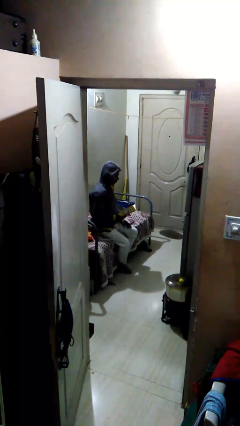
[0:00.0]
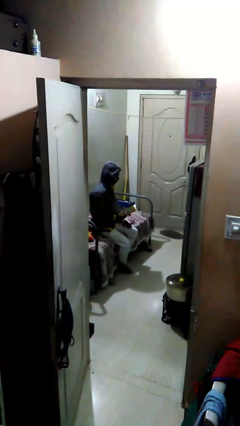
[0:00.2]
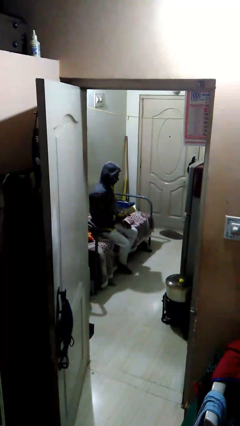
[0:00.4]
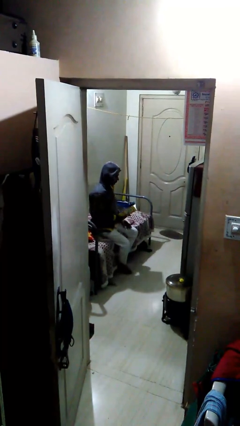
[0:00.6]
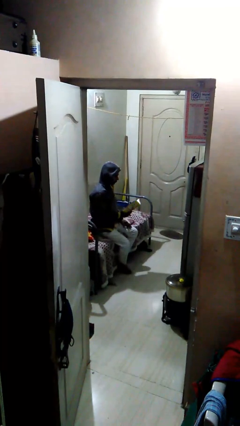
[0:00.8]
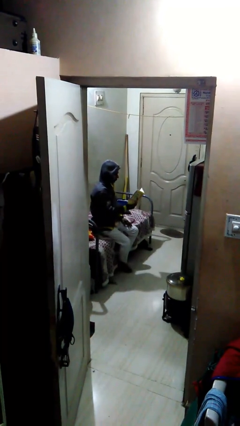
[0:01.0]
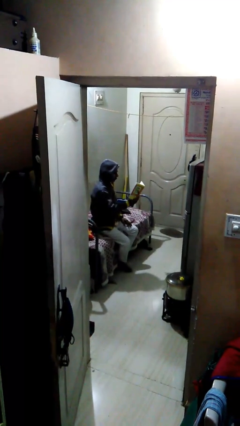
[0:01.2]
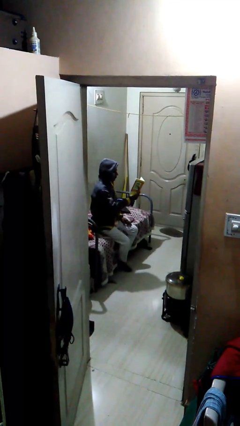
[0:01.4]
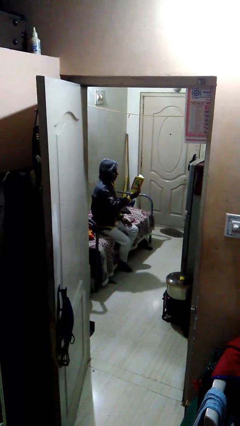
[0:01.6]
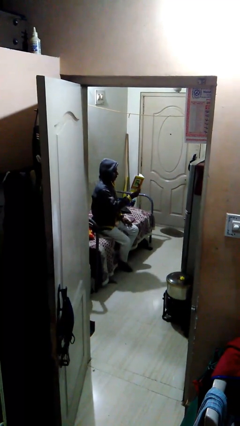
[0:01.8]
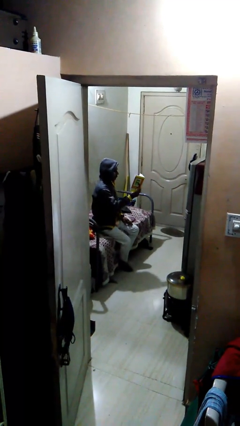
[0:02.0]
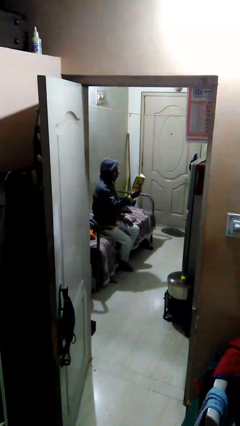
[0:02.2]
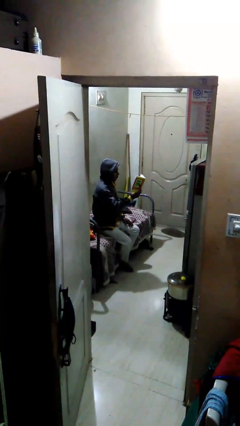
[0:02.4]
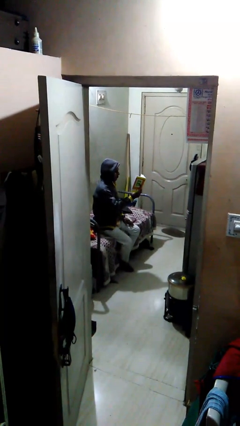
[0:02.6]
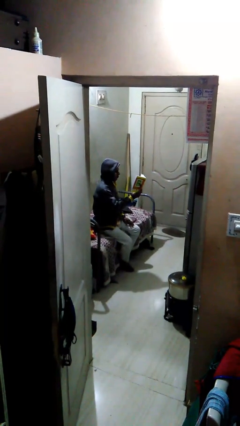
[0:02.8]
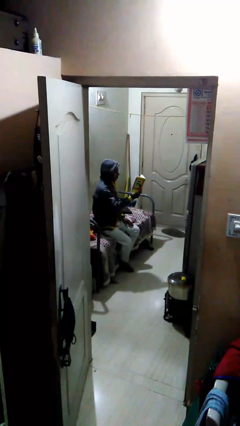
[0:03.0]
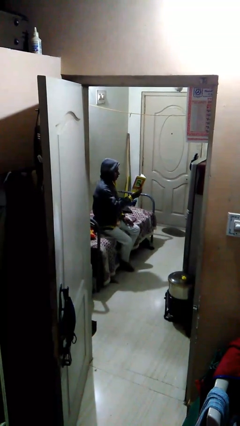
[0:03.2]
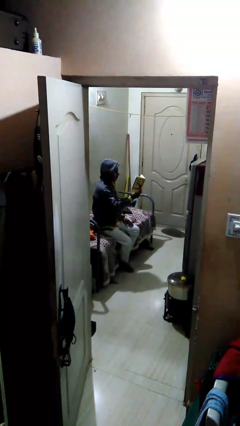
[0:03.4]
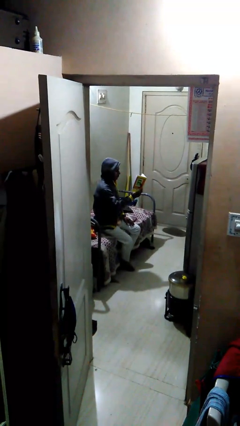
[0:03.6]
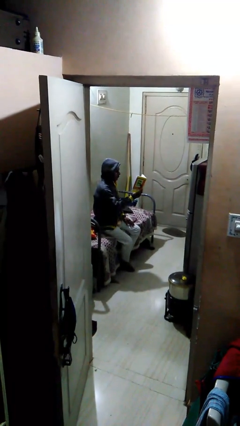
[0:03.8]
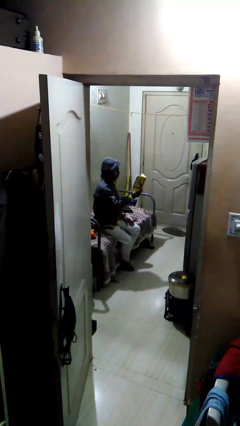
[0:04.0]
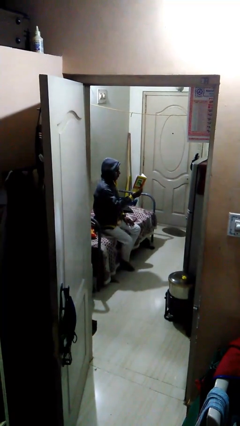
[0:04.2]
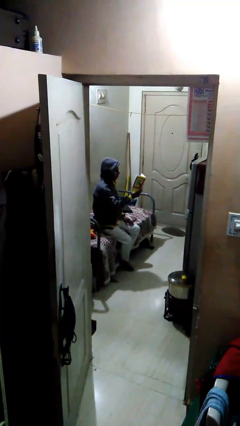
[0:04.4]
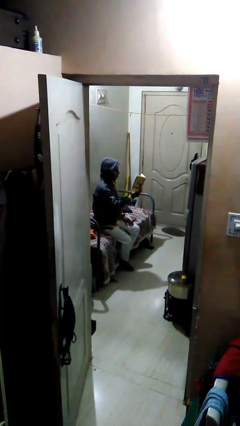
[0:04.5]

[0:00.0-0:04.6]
person reads document

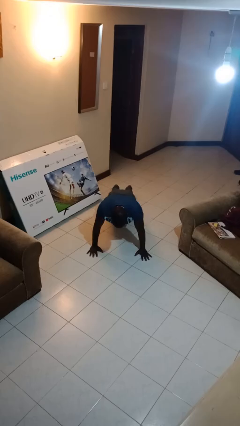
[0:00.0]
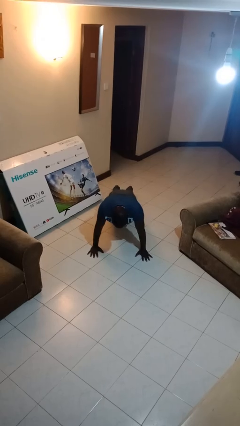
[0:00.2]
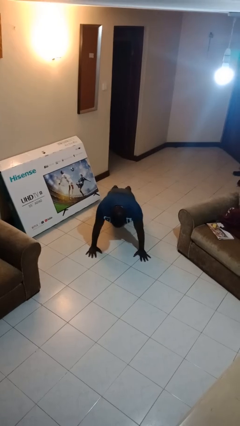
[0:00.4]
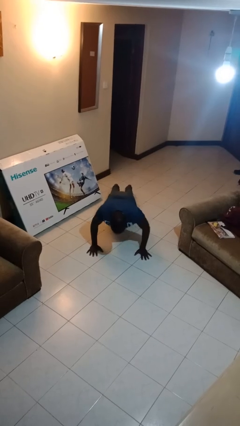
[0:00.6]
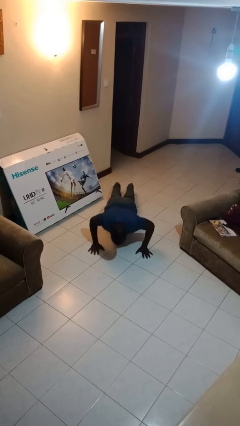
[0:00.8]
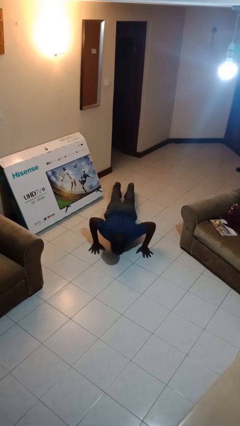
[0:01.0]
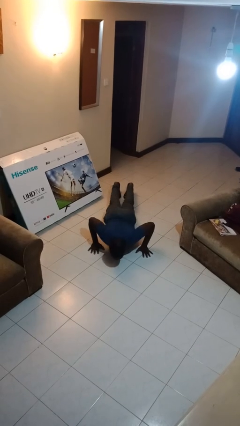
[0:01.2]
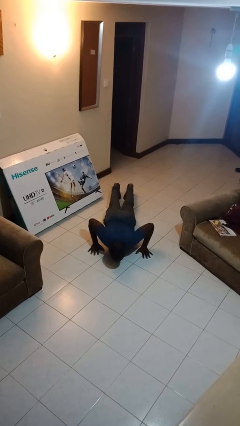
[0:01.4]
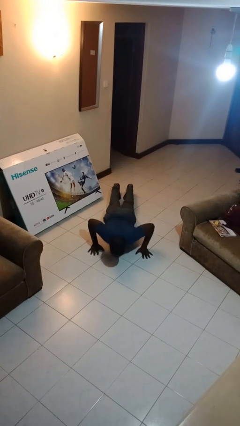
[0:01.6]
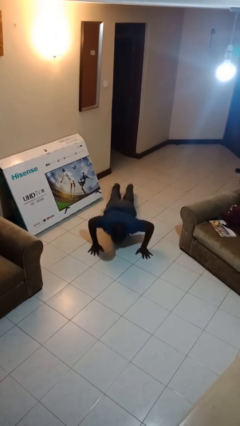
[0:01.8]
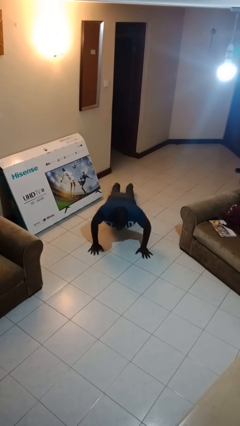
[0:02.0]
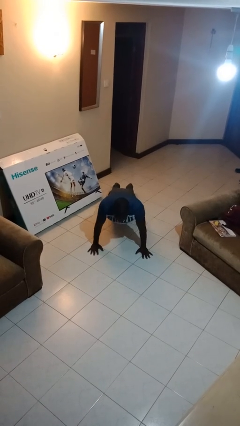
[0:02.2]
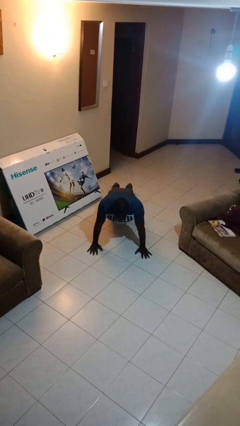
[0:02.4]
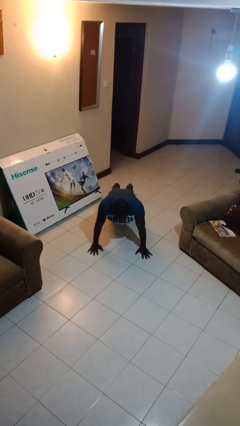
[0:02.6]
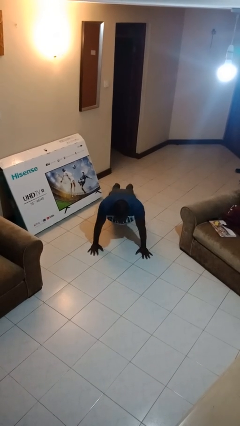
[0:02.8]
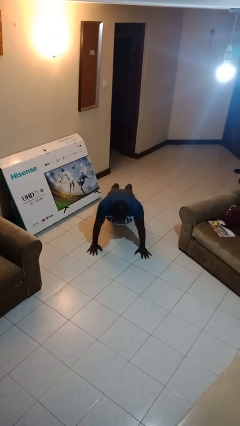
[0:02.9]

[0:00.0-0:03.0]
person exercises with pushup

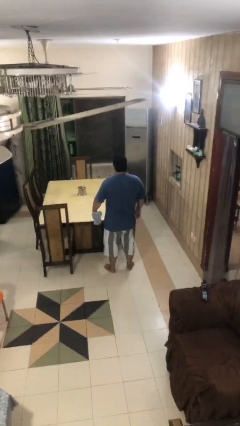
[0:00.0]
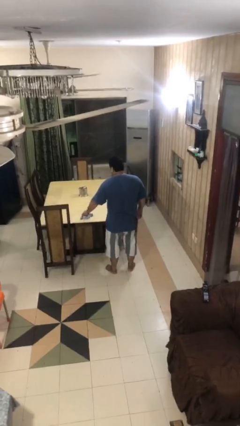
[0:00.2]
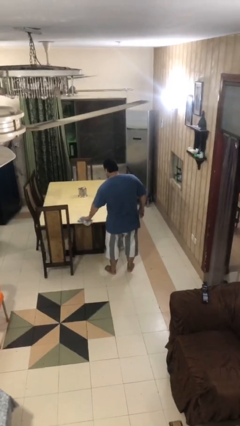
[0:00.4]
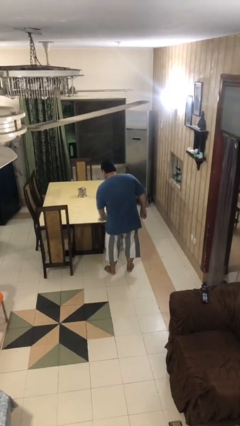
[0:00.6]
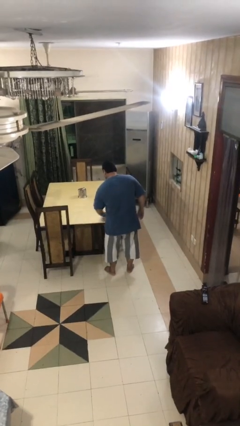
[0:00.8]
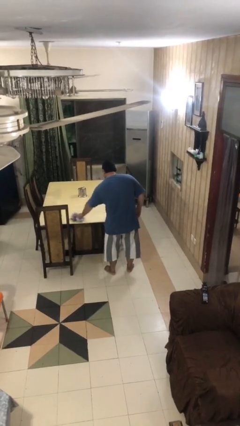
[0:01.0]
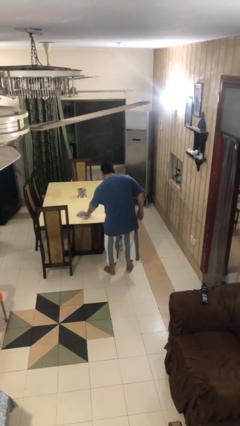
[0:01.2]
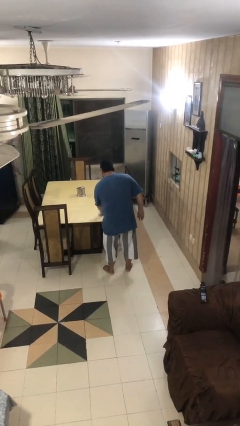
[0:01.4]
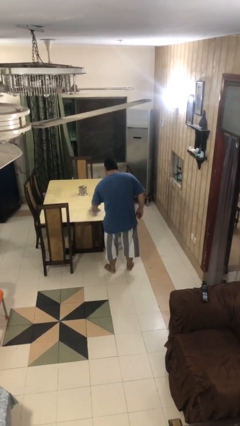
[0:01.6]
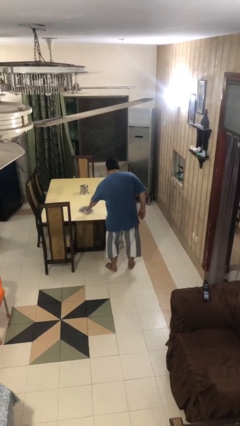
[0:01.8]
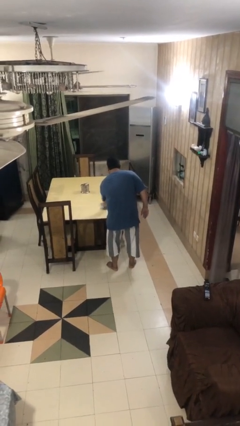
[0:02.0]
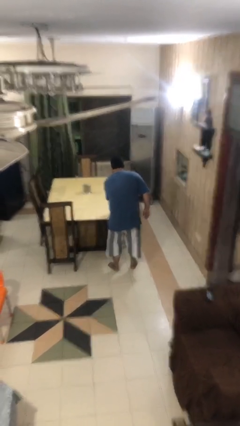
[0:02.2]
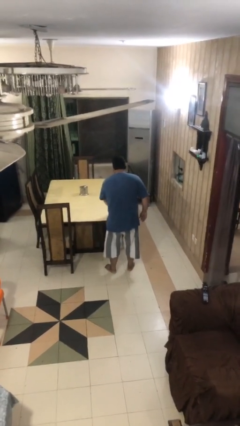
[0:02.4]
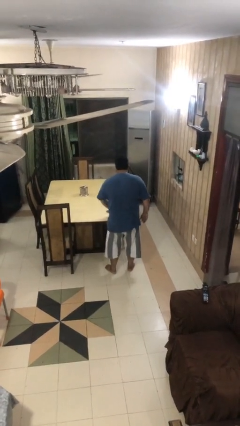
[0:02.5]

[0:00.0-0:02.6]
person cleans table with rag

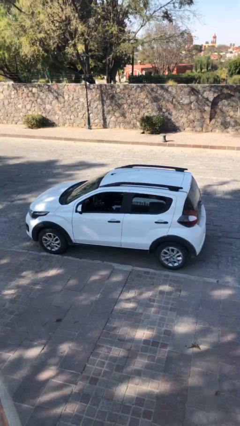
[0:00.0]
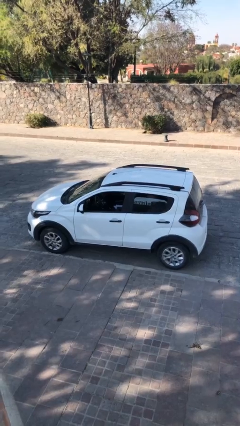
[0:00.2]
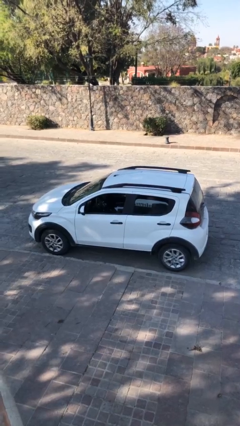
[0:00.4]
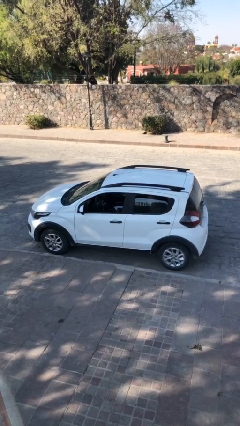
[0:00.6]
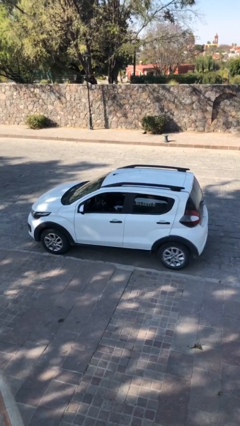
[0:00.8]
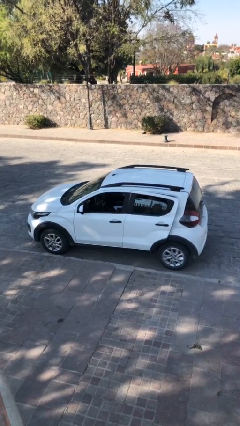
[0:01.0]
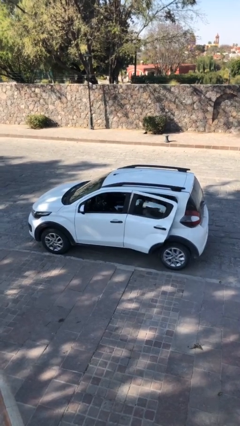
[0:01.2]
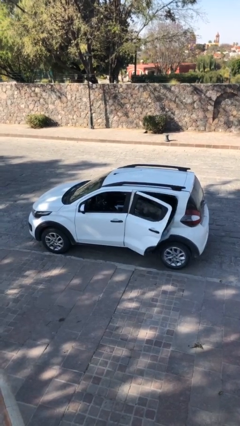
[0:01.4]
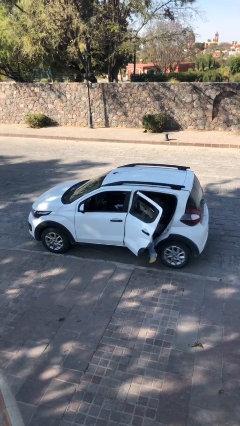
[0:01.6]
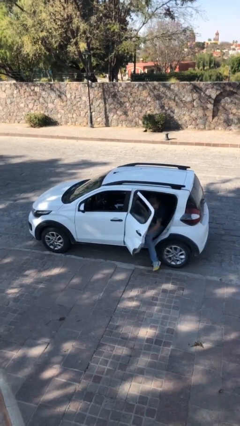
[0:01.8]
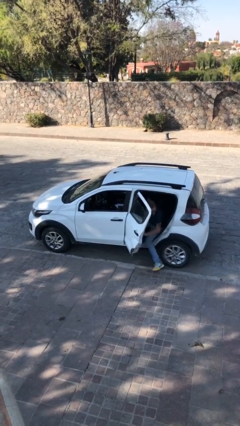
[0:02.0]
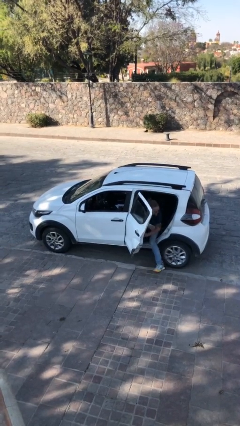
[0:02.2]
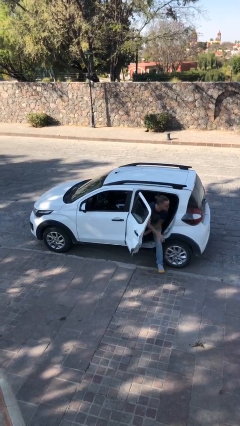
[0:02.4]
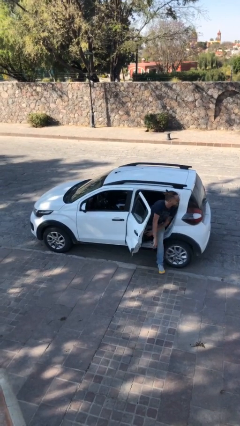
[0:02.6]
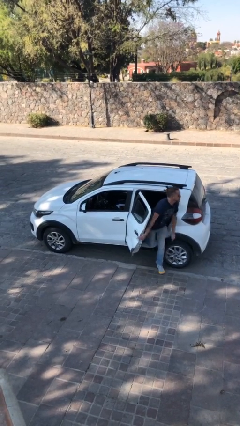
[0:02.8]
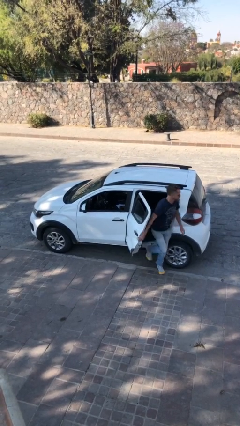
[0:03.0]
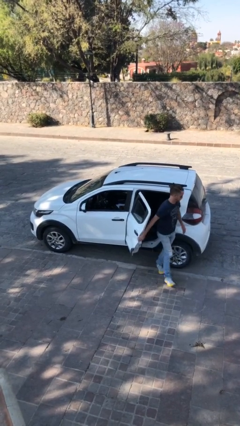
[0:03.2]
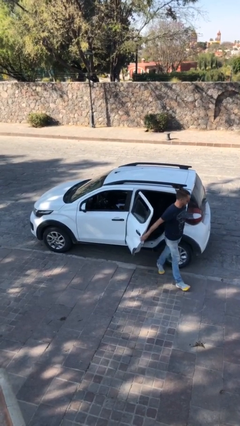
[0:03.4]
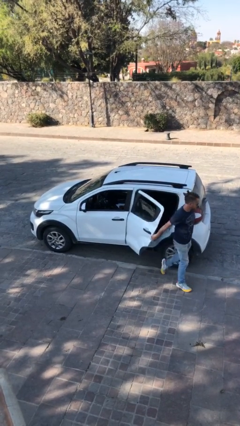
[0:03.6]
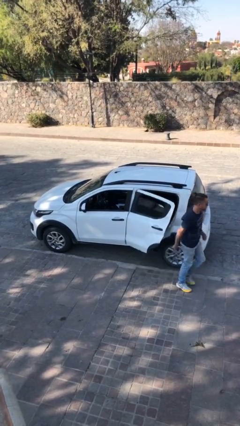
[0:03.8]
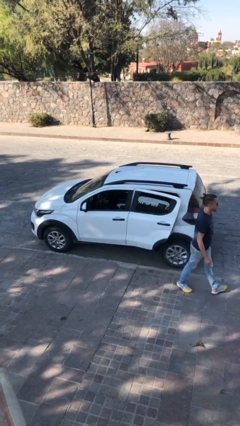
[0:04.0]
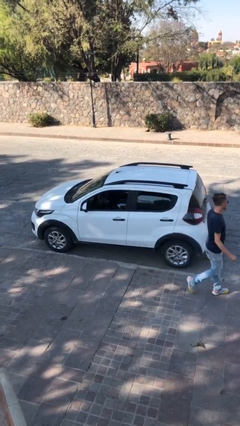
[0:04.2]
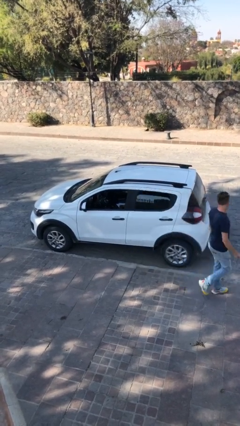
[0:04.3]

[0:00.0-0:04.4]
car drops off person

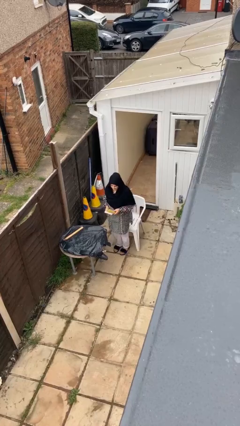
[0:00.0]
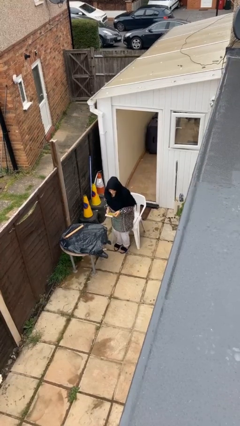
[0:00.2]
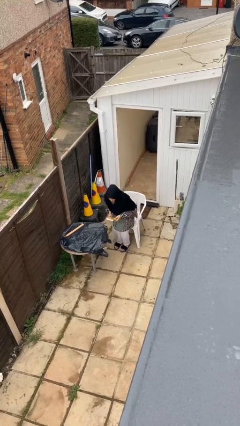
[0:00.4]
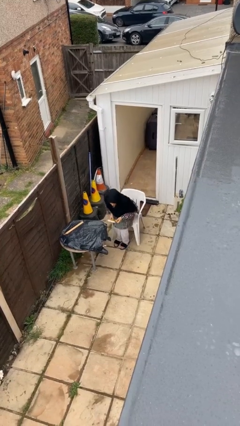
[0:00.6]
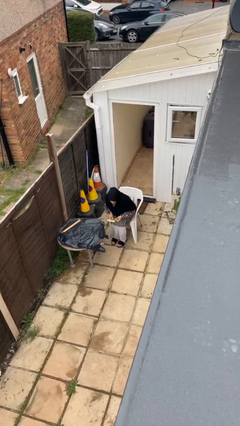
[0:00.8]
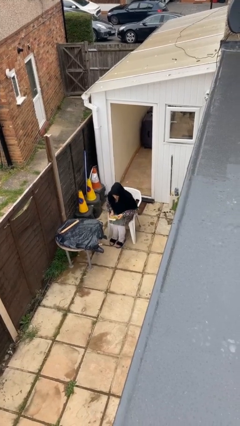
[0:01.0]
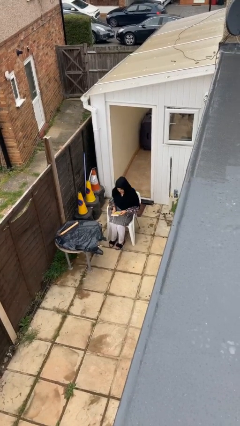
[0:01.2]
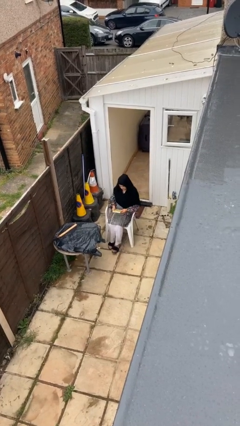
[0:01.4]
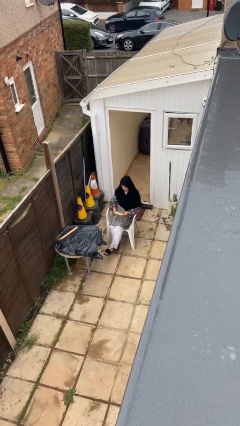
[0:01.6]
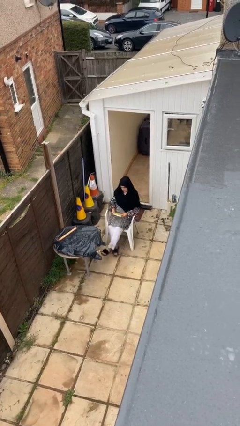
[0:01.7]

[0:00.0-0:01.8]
person sits down

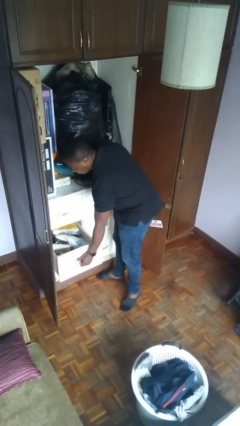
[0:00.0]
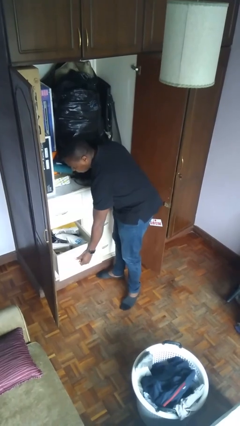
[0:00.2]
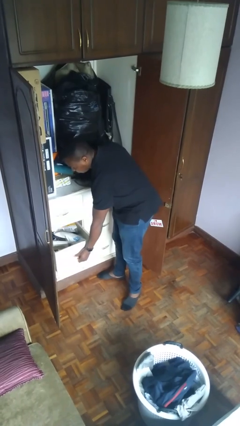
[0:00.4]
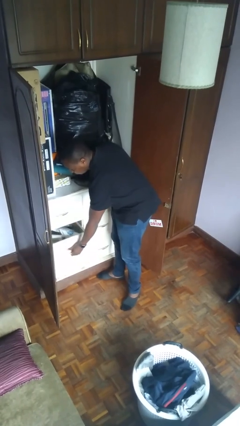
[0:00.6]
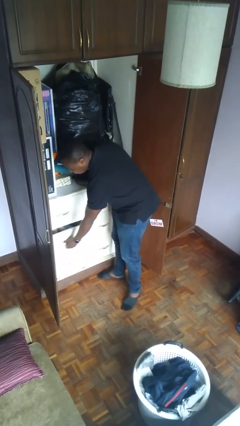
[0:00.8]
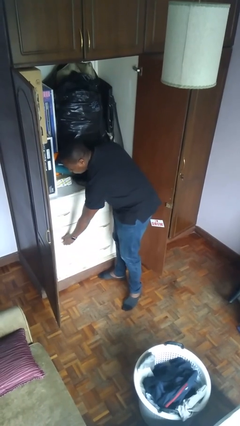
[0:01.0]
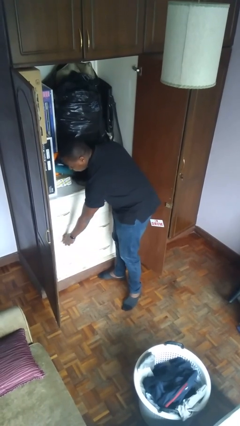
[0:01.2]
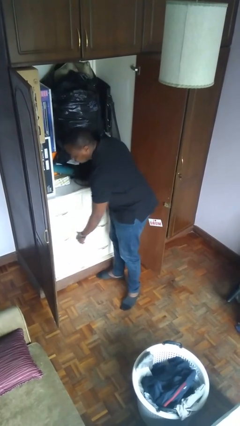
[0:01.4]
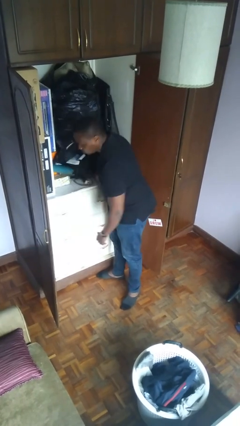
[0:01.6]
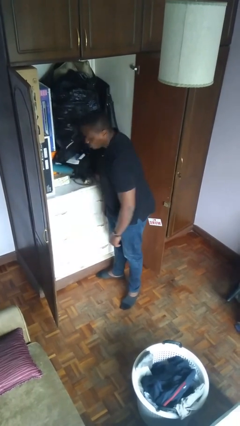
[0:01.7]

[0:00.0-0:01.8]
person closes dresser drawer
